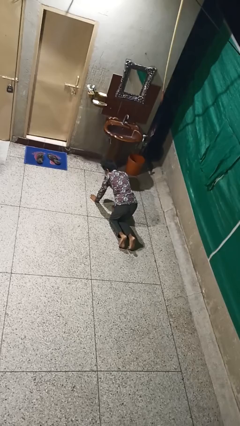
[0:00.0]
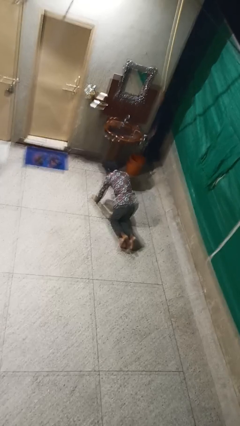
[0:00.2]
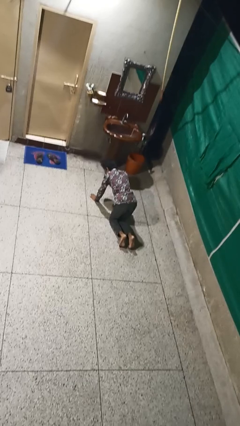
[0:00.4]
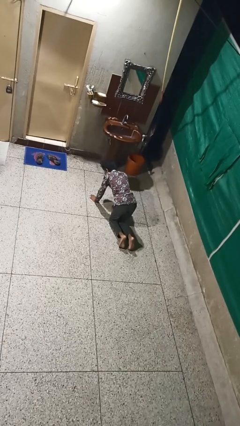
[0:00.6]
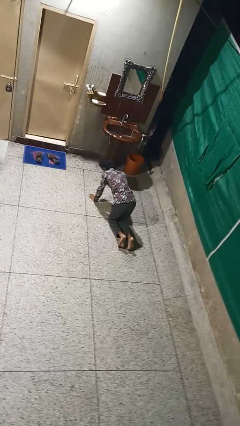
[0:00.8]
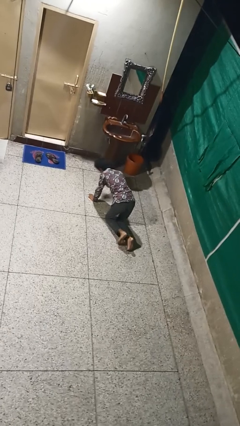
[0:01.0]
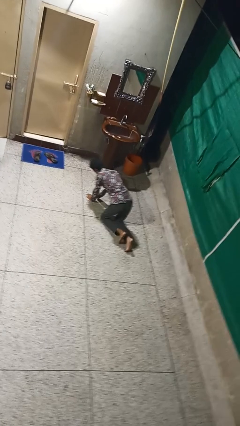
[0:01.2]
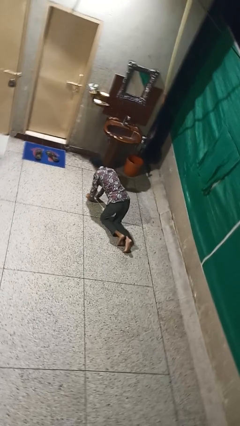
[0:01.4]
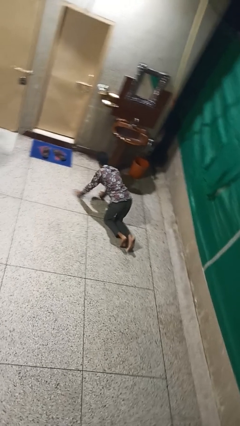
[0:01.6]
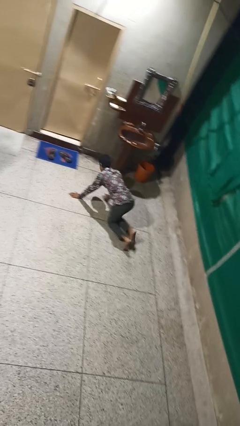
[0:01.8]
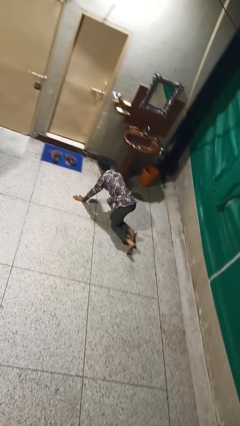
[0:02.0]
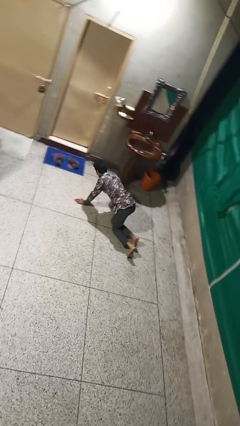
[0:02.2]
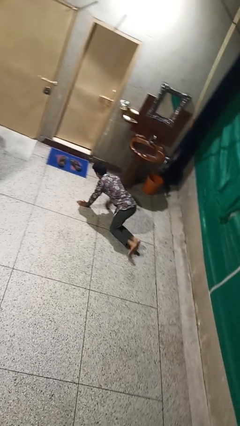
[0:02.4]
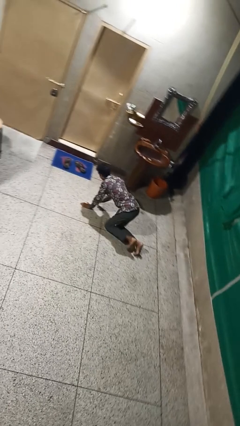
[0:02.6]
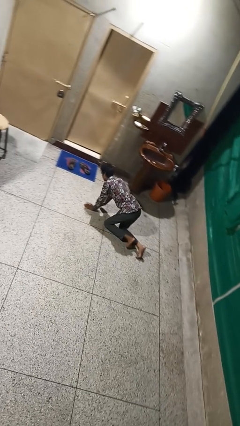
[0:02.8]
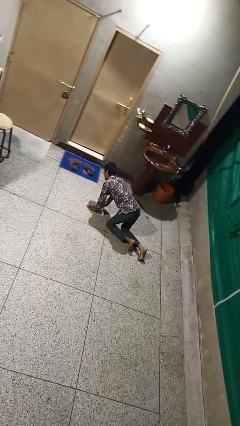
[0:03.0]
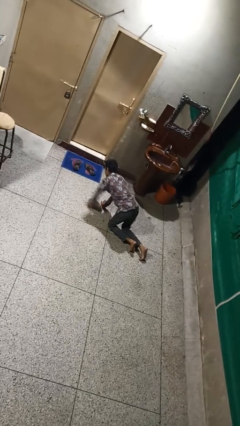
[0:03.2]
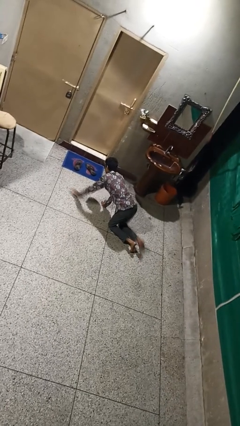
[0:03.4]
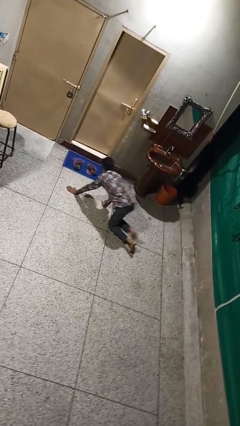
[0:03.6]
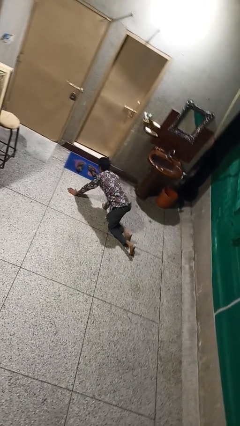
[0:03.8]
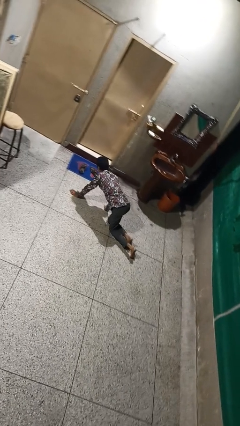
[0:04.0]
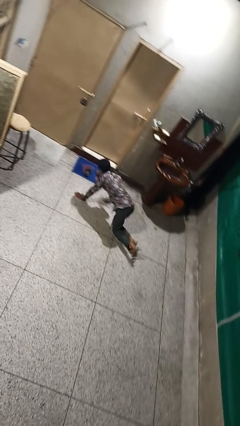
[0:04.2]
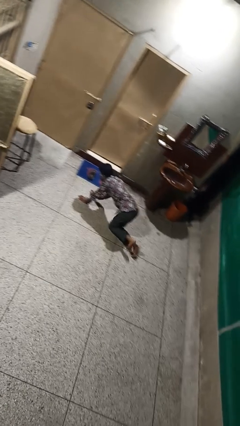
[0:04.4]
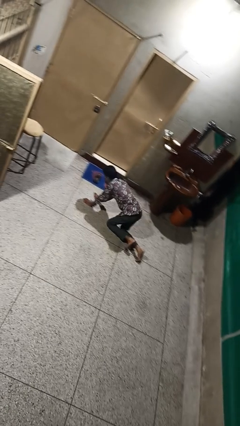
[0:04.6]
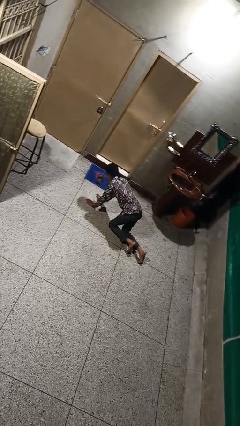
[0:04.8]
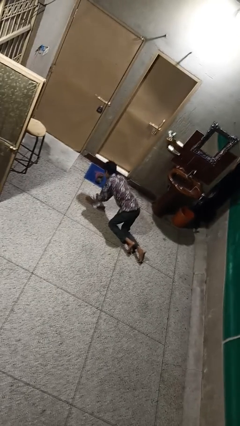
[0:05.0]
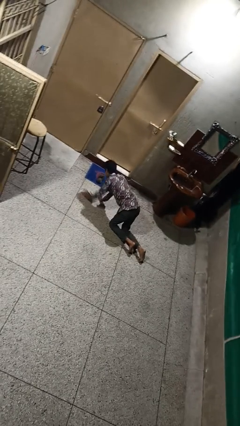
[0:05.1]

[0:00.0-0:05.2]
person crawls

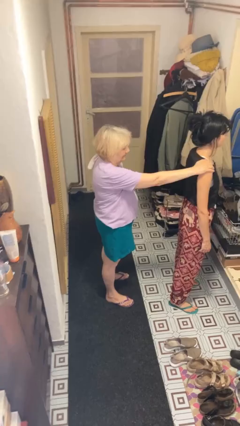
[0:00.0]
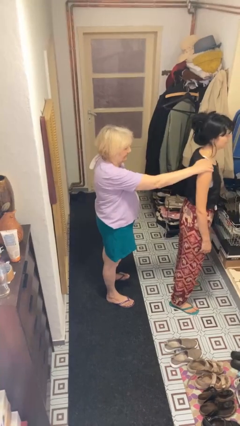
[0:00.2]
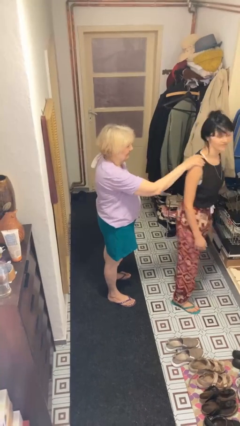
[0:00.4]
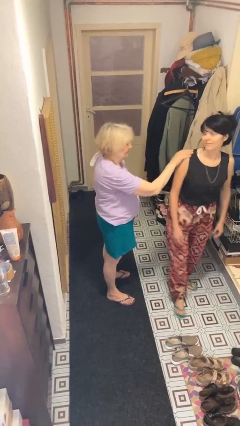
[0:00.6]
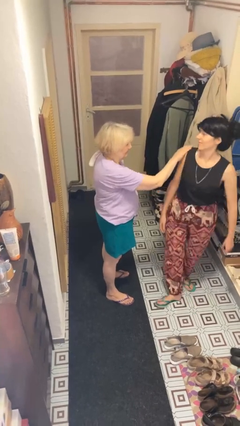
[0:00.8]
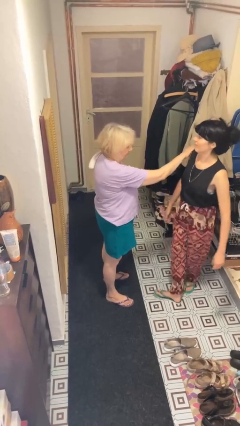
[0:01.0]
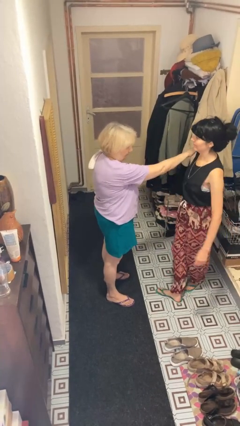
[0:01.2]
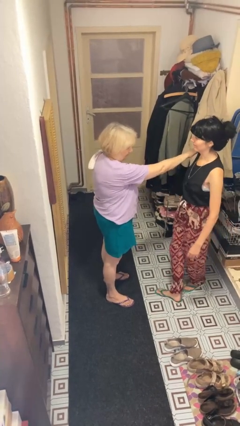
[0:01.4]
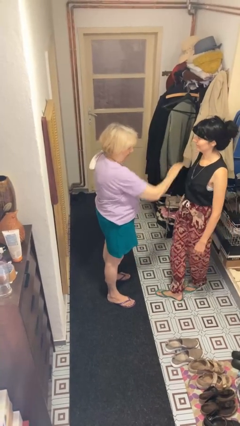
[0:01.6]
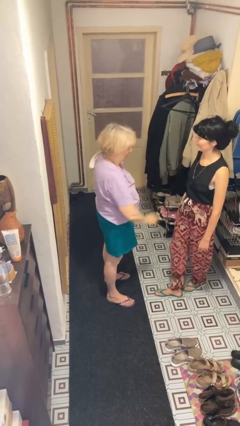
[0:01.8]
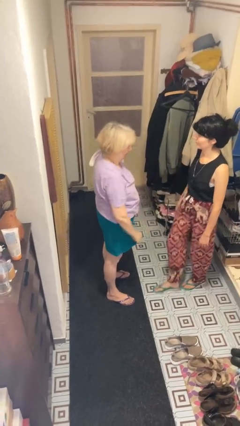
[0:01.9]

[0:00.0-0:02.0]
person spins person around

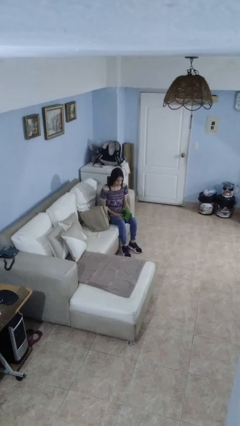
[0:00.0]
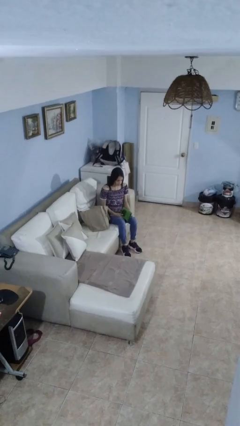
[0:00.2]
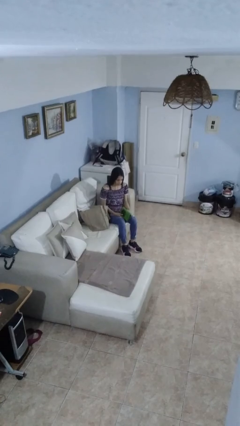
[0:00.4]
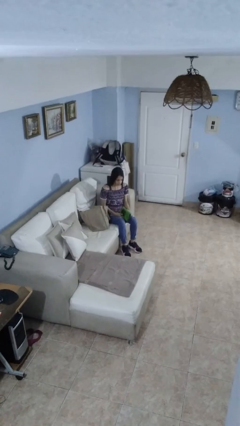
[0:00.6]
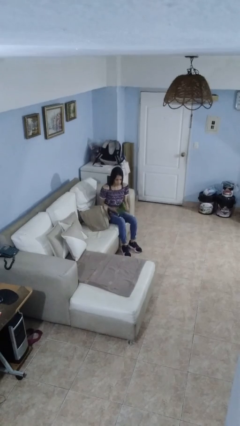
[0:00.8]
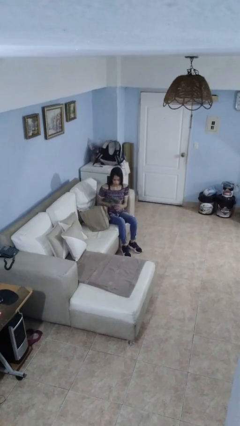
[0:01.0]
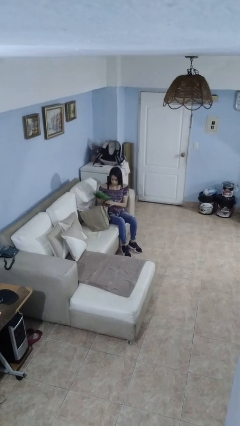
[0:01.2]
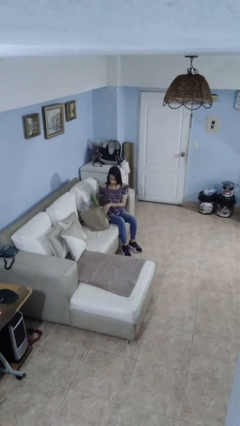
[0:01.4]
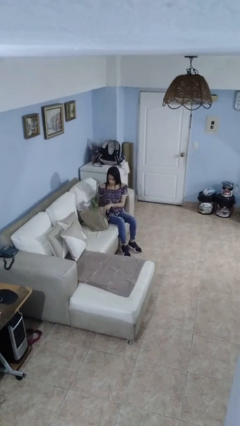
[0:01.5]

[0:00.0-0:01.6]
person puts object into bag

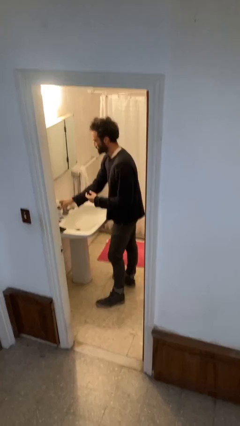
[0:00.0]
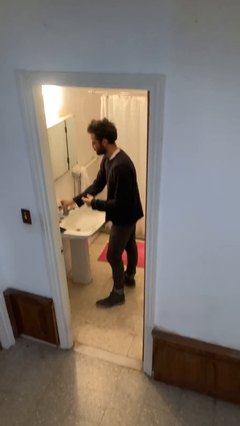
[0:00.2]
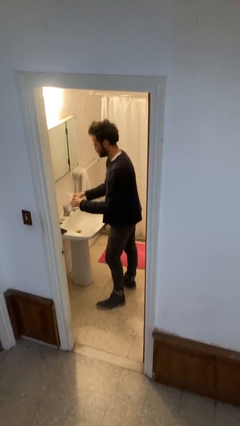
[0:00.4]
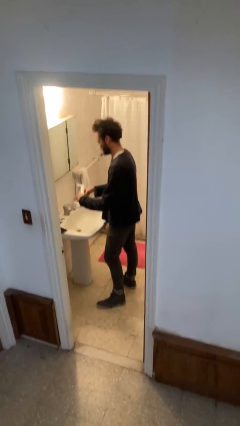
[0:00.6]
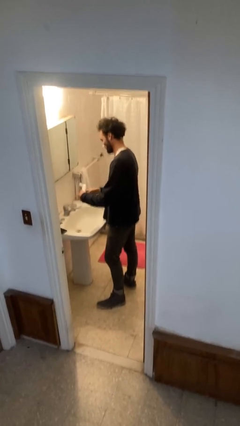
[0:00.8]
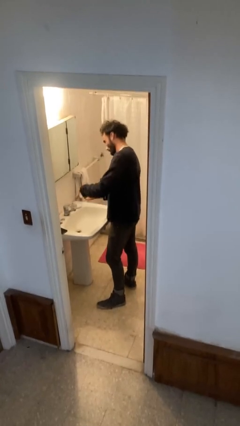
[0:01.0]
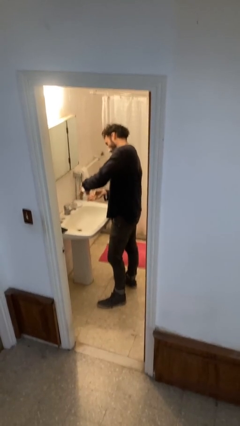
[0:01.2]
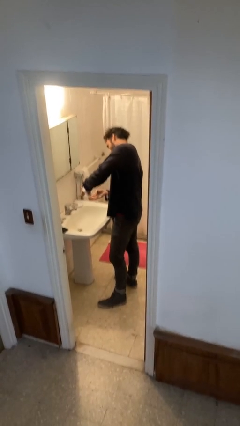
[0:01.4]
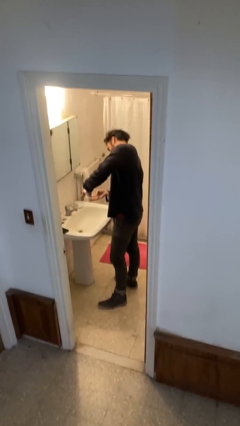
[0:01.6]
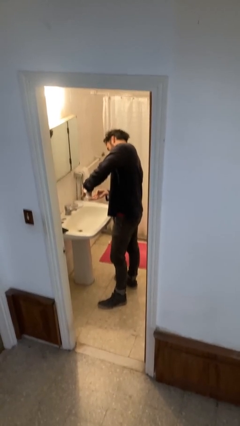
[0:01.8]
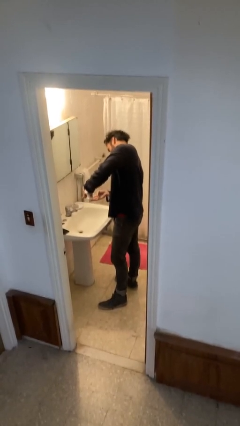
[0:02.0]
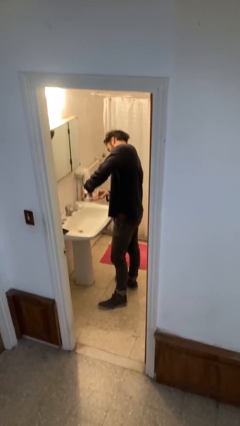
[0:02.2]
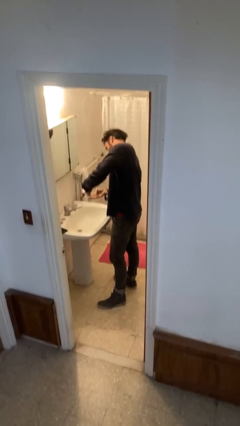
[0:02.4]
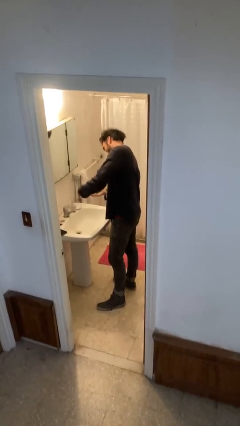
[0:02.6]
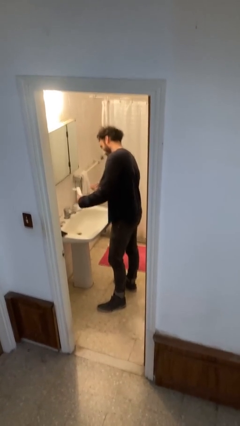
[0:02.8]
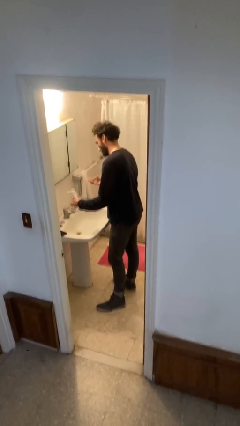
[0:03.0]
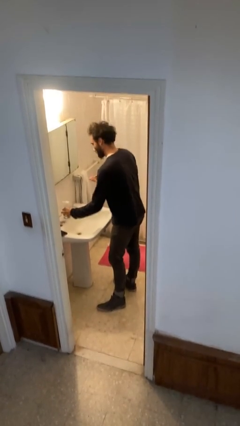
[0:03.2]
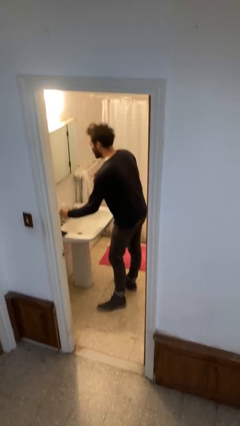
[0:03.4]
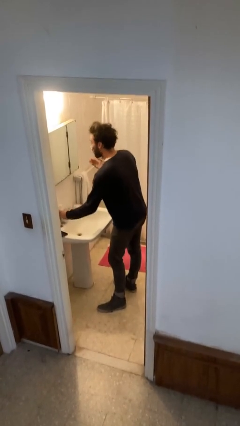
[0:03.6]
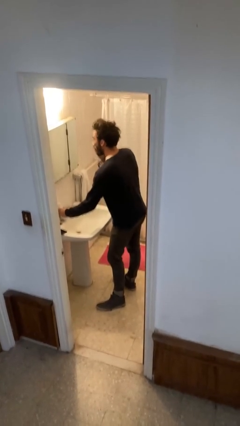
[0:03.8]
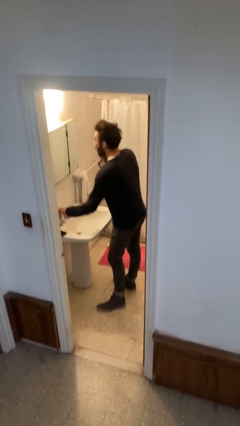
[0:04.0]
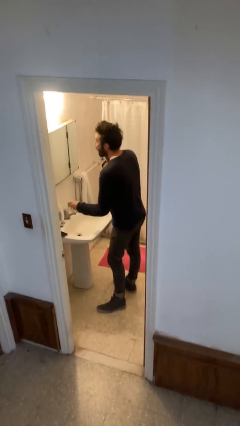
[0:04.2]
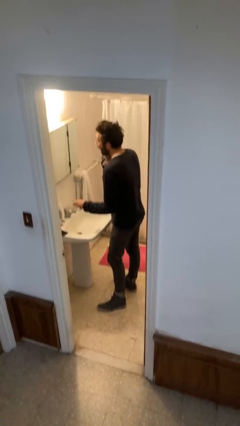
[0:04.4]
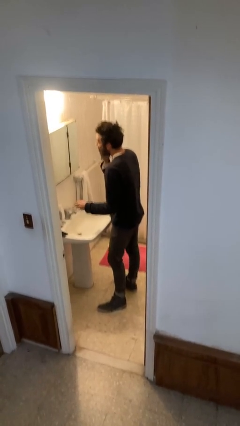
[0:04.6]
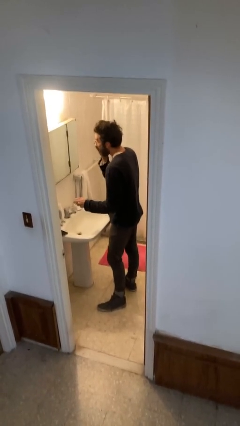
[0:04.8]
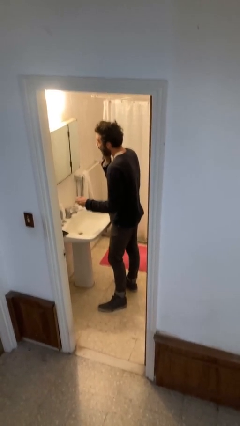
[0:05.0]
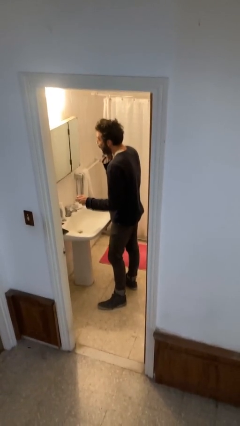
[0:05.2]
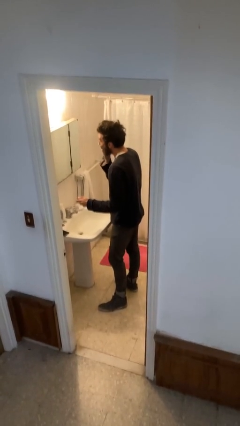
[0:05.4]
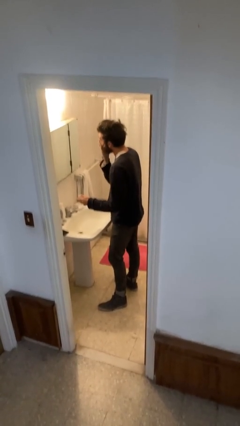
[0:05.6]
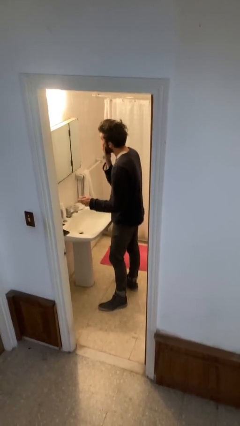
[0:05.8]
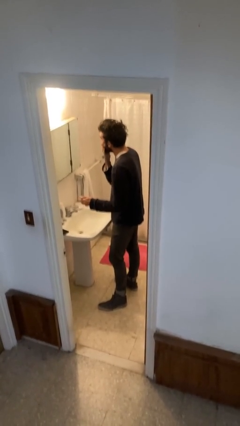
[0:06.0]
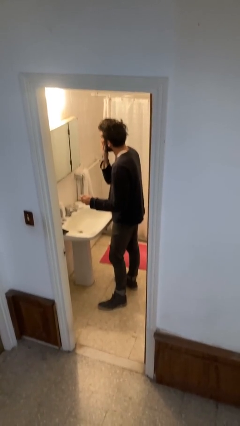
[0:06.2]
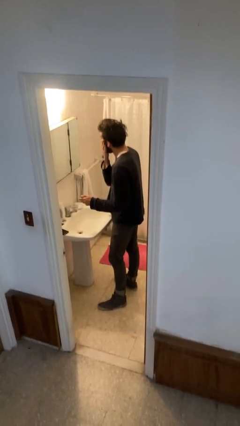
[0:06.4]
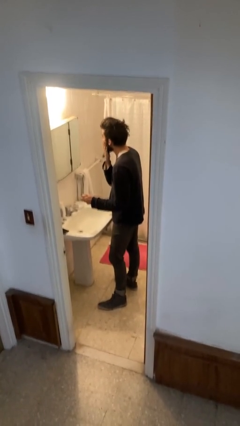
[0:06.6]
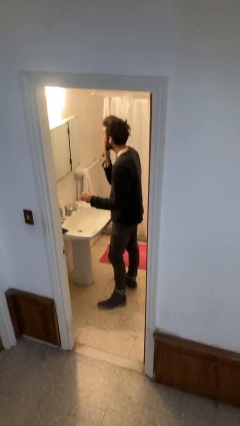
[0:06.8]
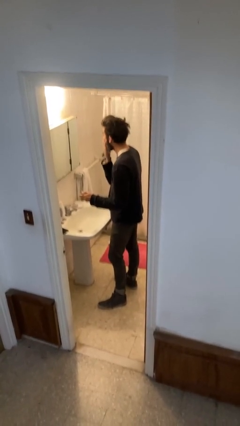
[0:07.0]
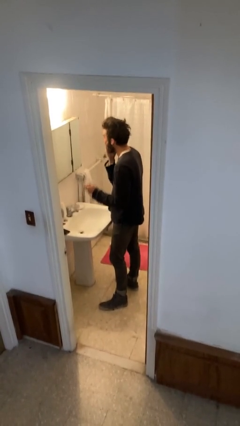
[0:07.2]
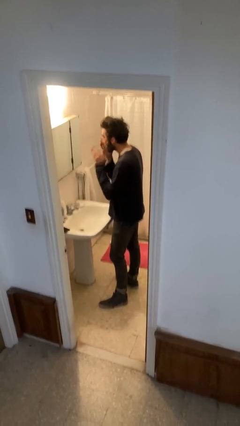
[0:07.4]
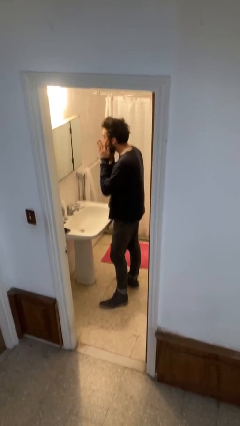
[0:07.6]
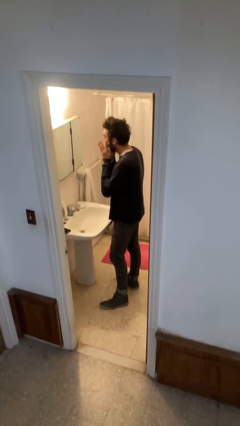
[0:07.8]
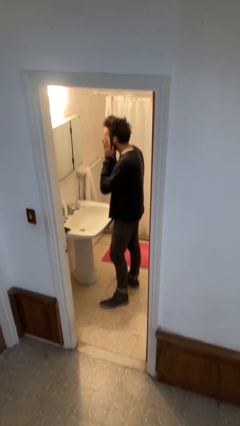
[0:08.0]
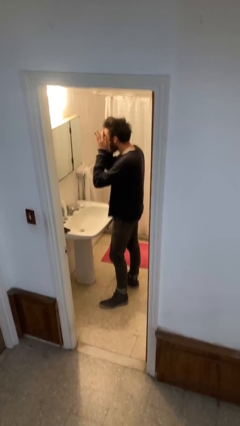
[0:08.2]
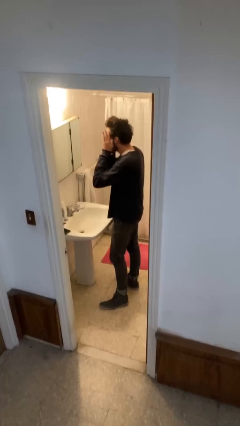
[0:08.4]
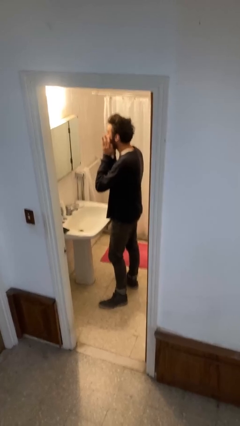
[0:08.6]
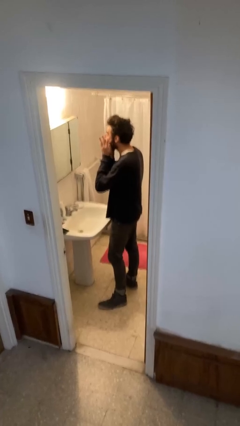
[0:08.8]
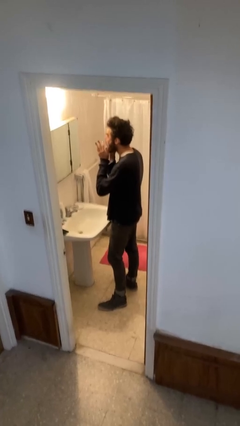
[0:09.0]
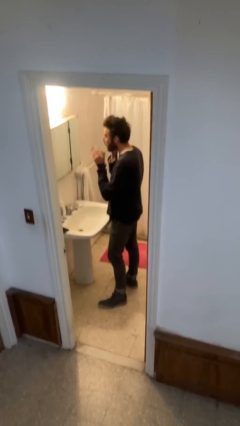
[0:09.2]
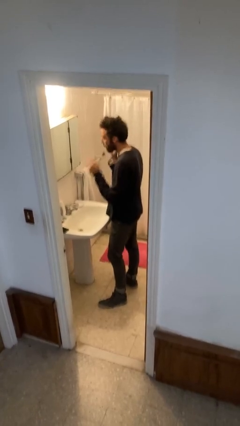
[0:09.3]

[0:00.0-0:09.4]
person applies facial moisturizer
